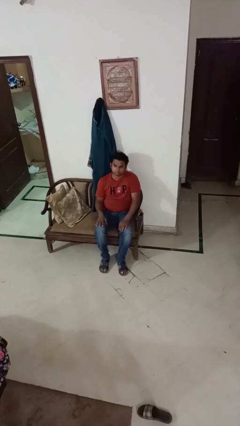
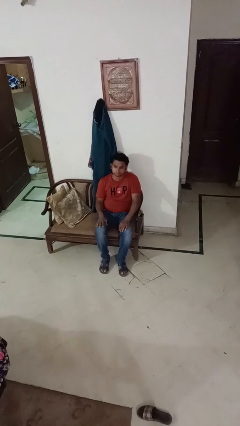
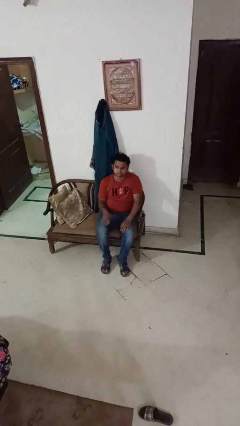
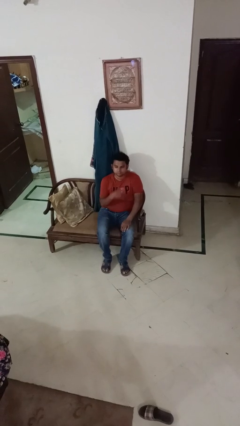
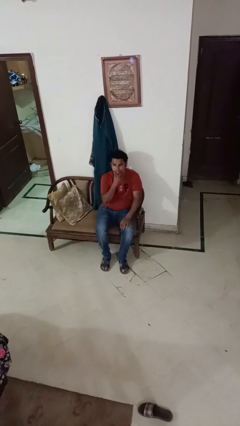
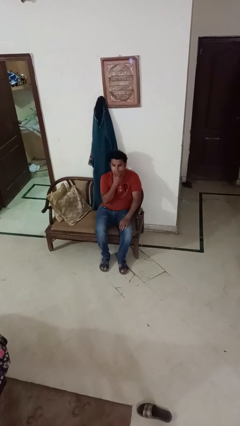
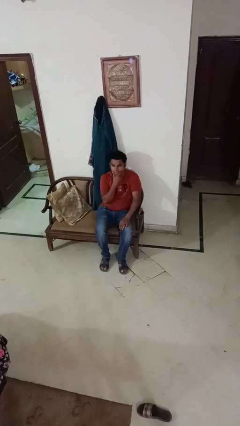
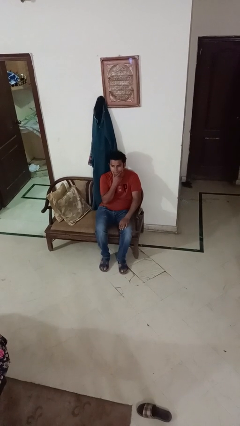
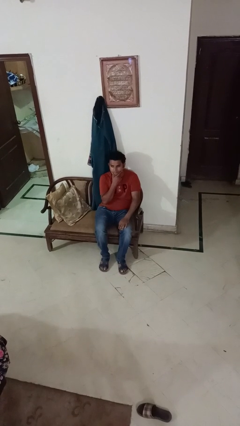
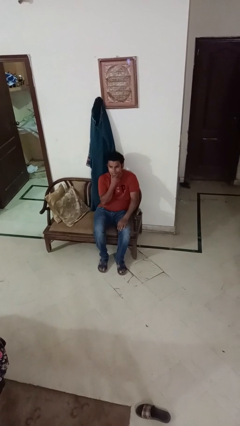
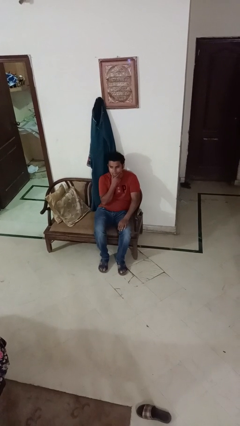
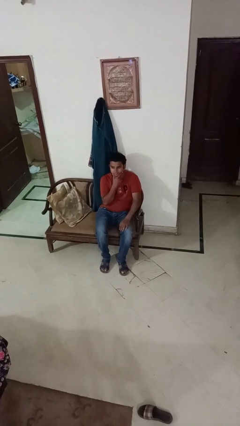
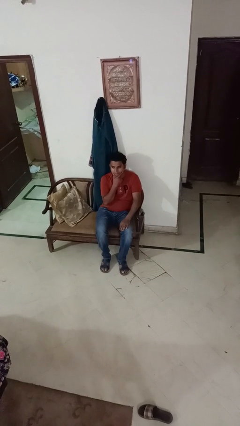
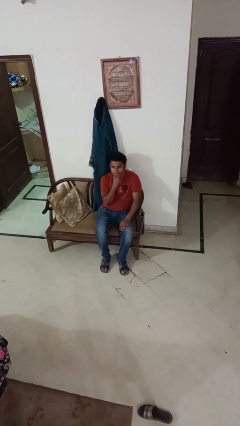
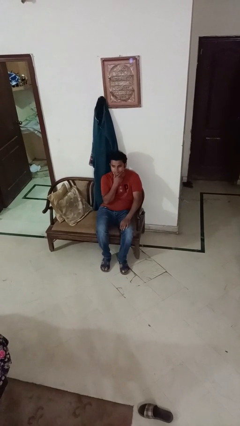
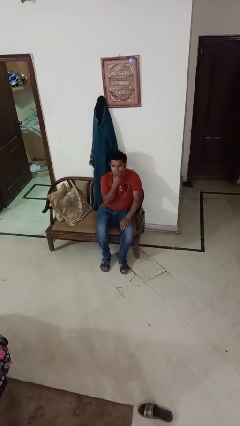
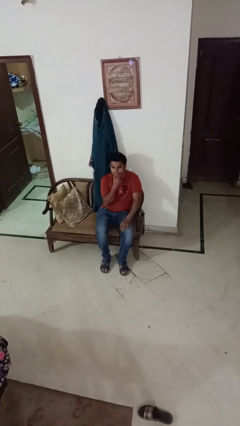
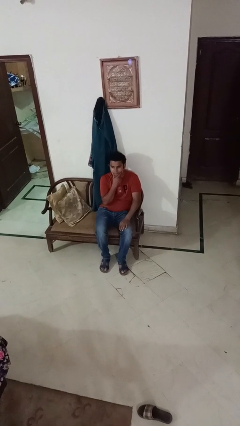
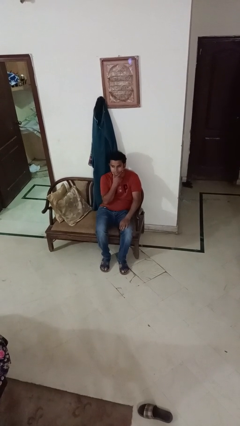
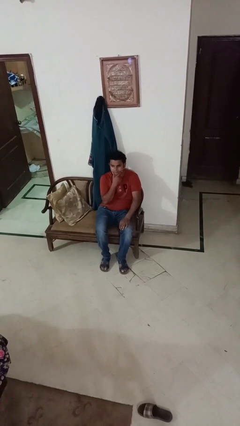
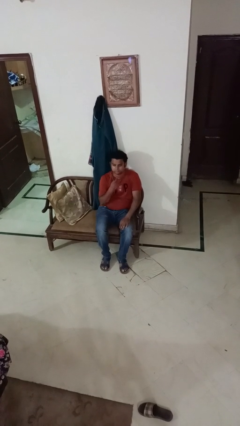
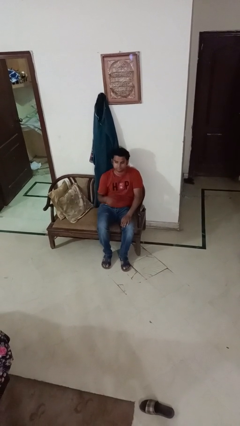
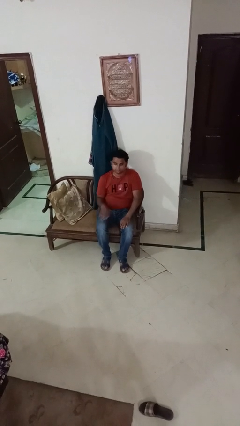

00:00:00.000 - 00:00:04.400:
person strokes chin

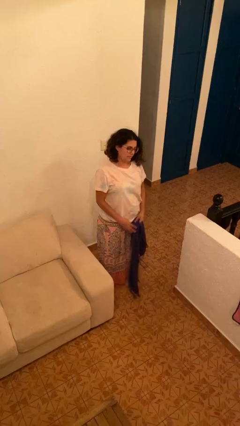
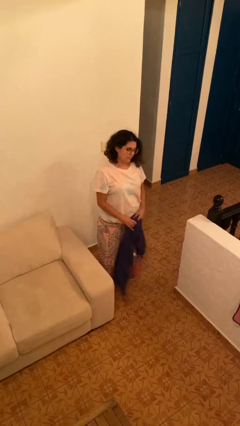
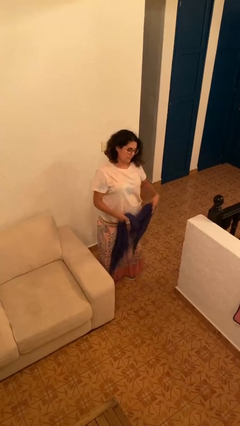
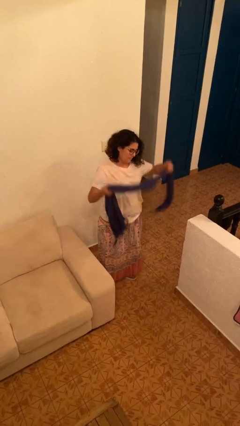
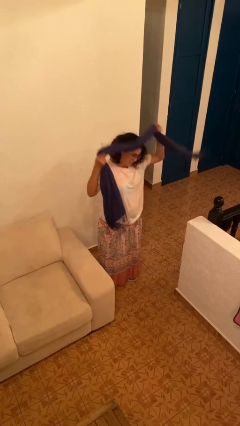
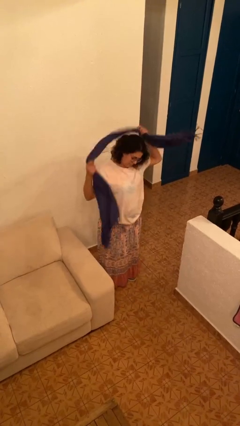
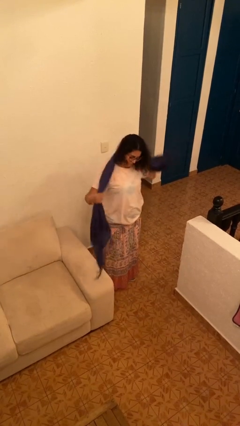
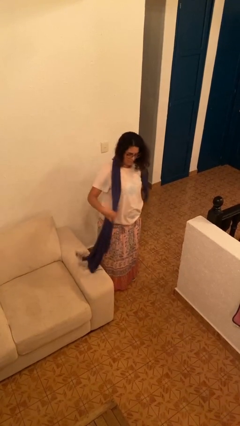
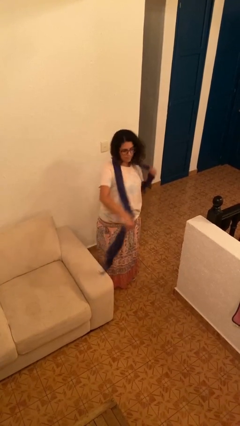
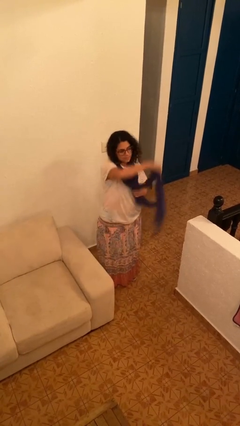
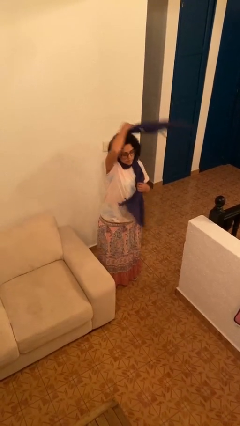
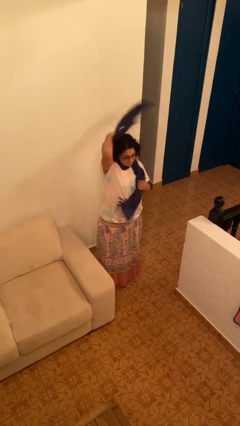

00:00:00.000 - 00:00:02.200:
person puts on scarf

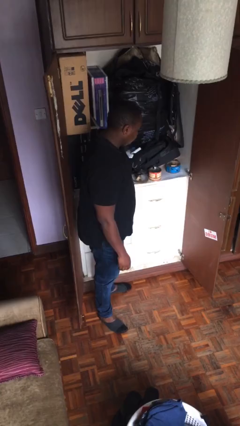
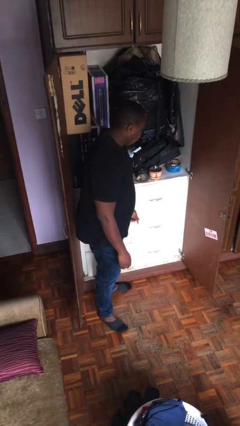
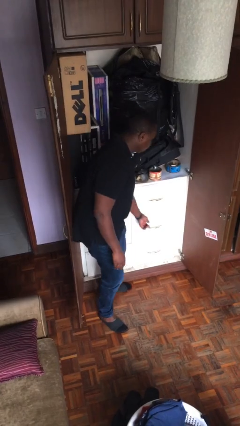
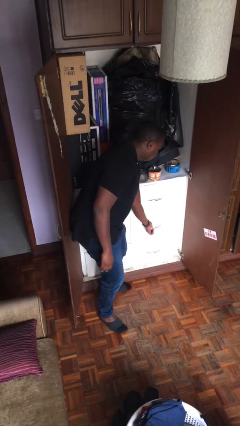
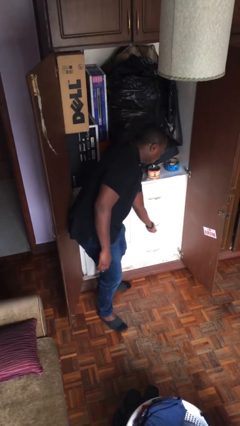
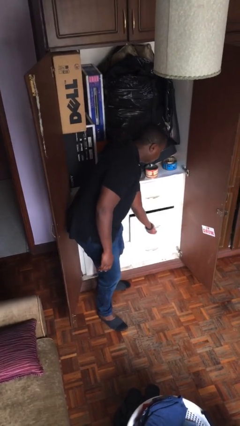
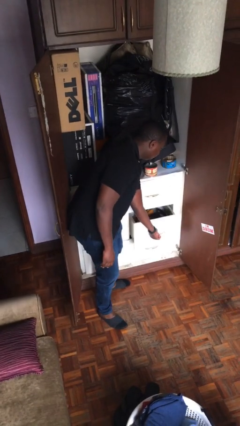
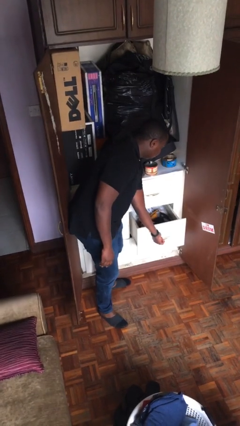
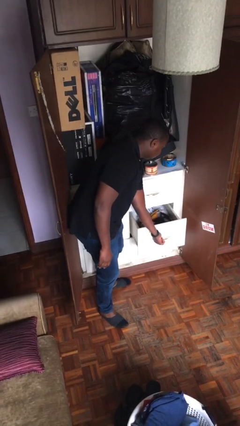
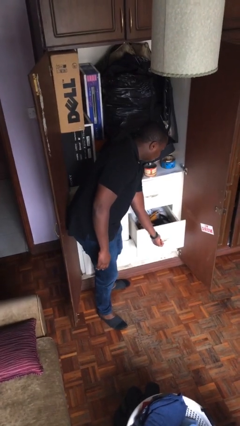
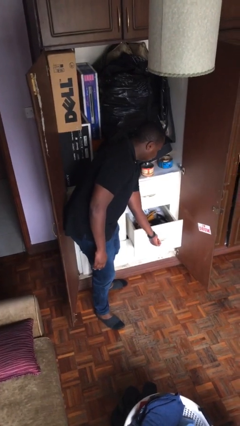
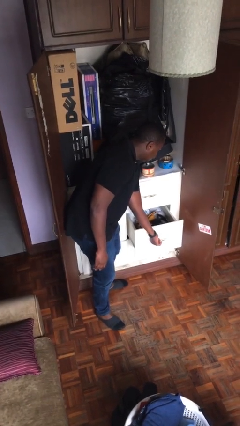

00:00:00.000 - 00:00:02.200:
person opens dresser drawer

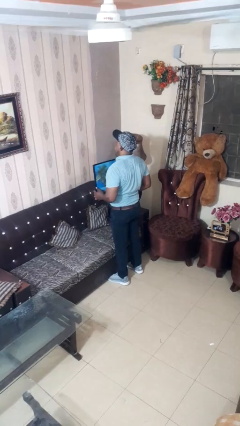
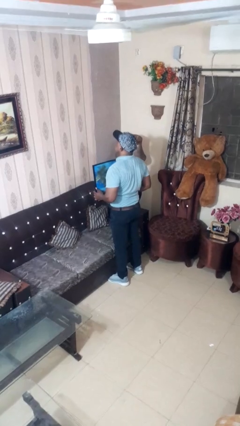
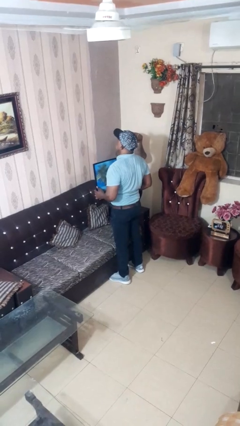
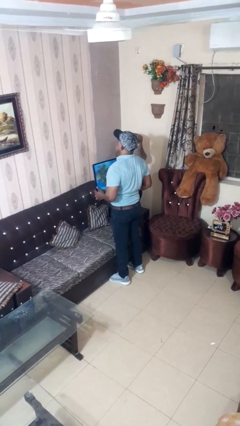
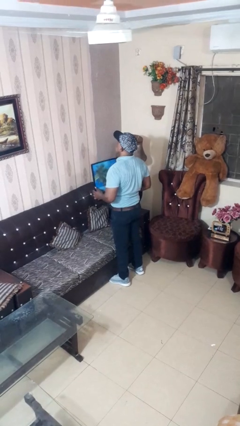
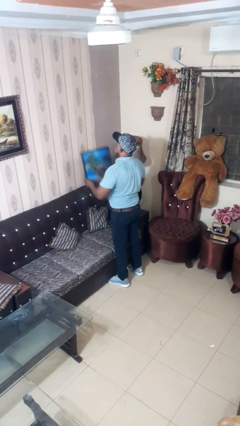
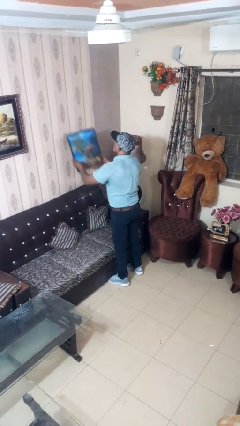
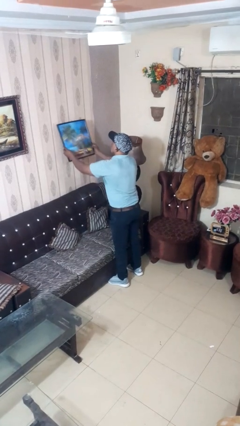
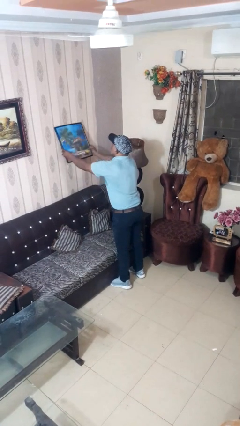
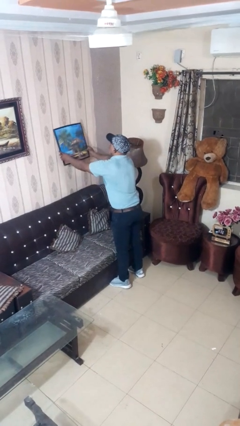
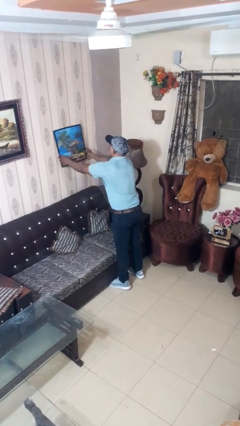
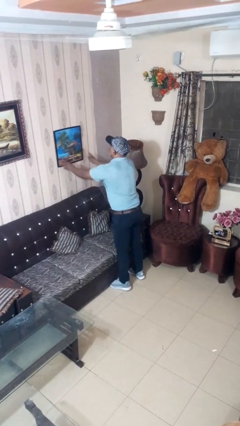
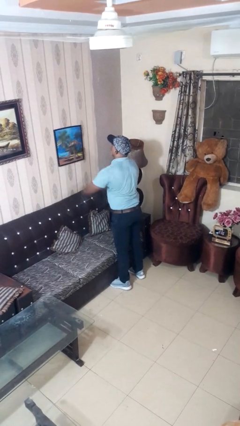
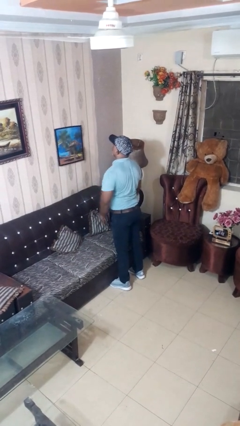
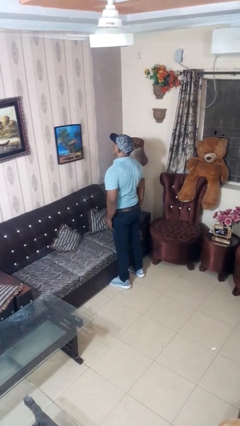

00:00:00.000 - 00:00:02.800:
person puts up picture frame

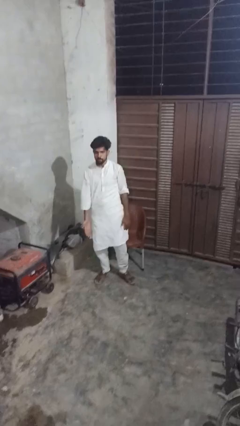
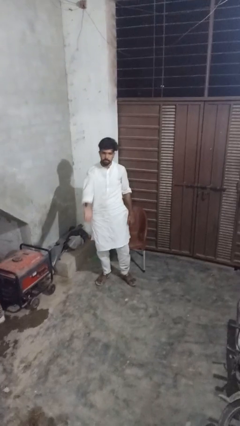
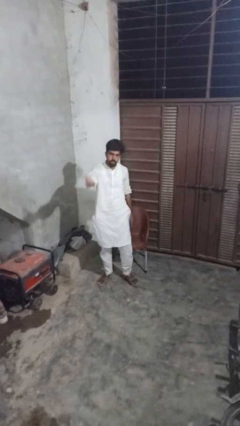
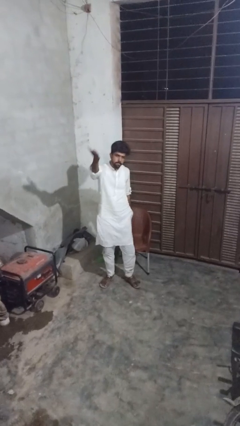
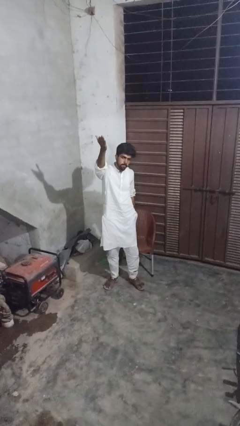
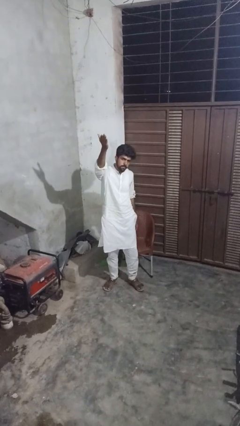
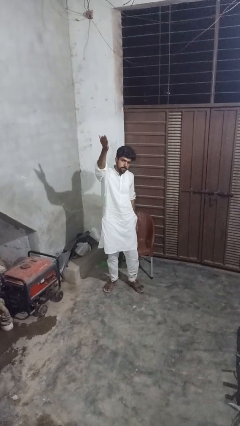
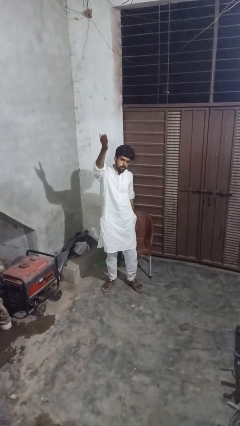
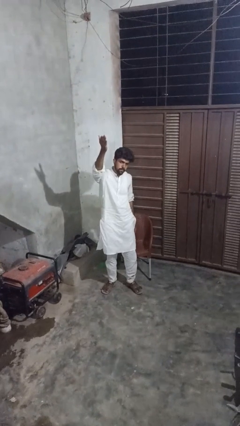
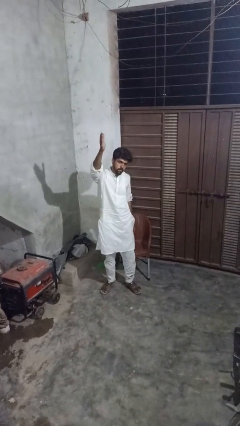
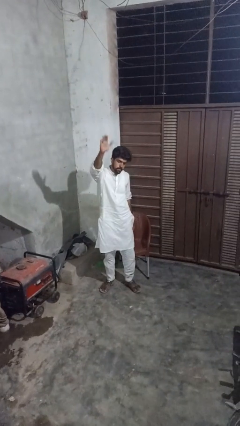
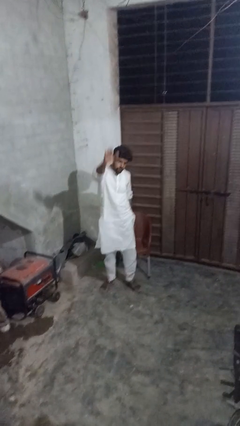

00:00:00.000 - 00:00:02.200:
person gestures swipe up

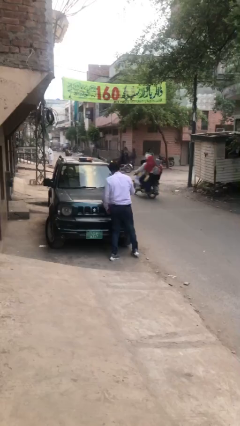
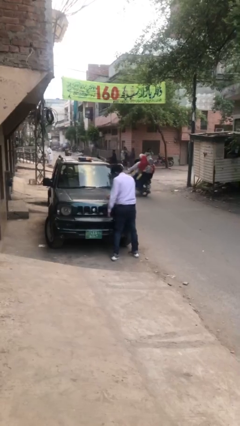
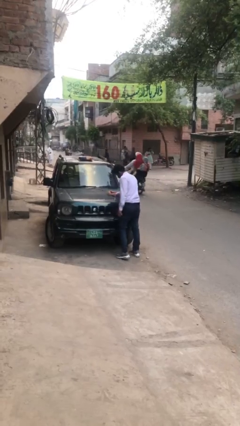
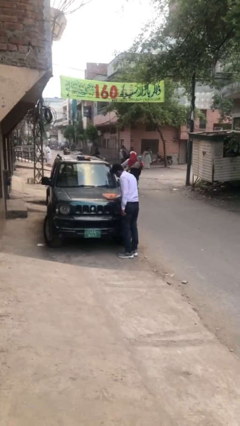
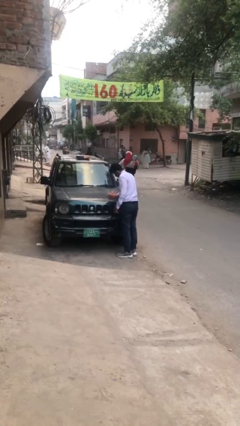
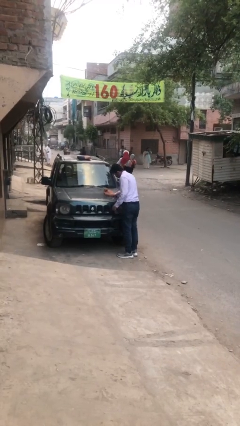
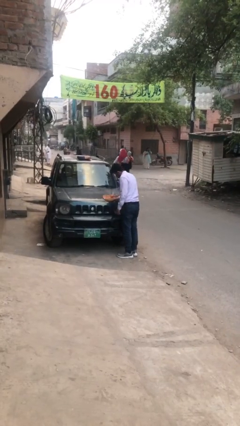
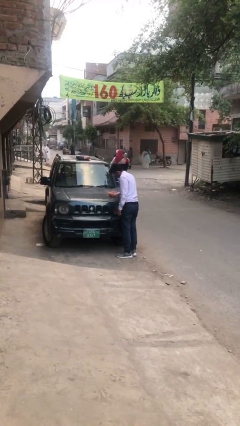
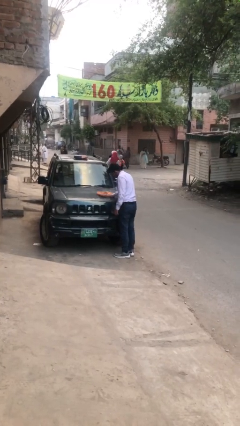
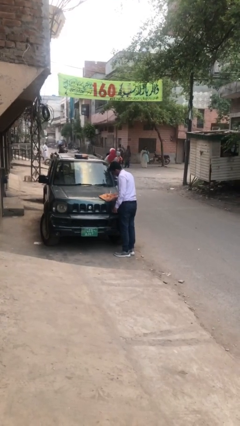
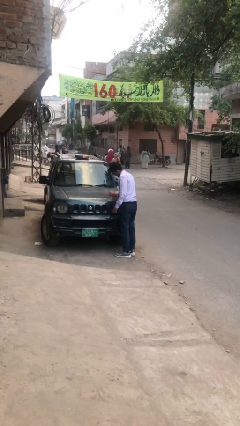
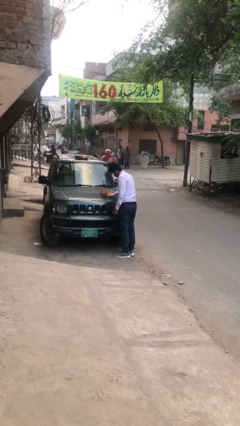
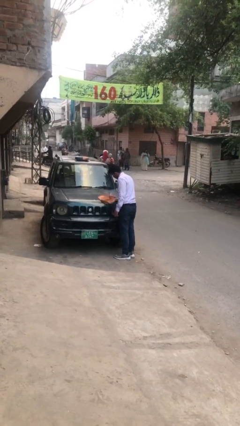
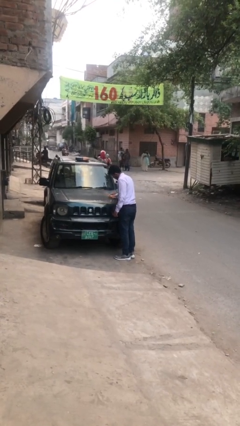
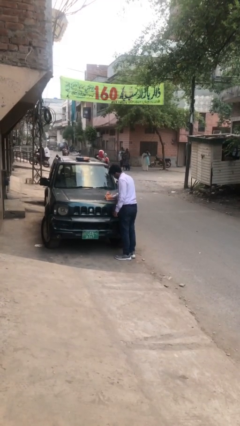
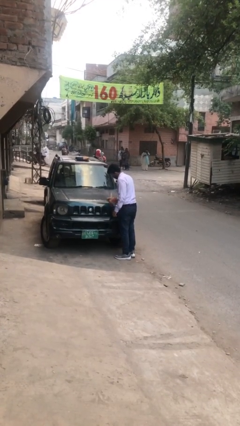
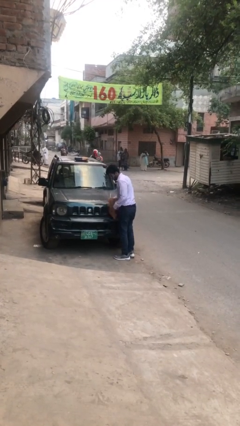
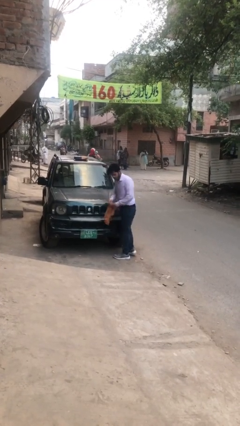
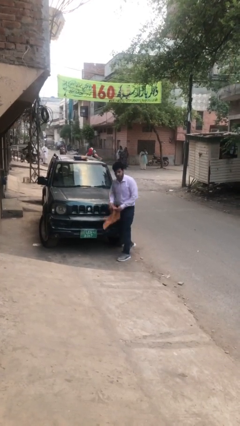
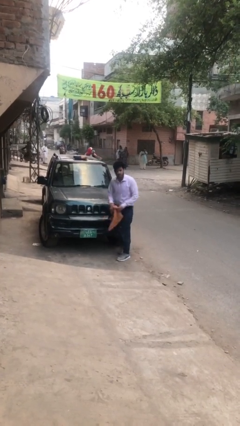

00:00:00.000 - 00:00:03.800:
person polishes car with rag
